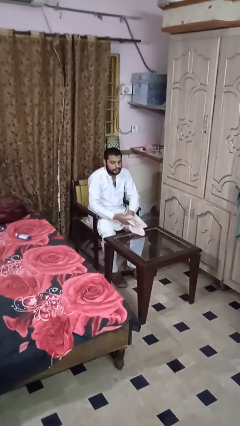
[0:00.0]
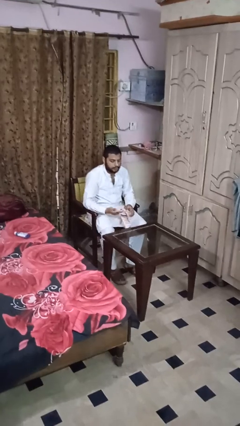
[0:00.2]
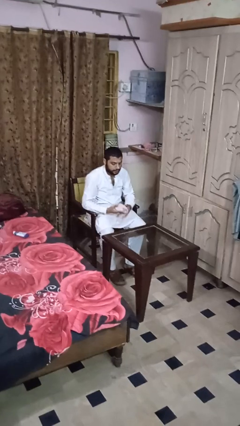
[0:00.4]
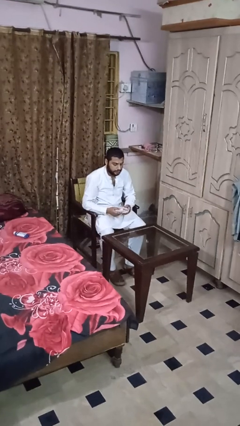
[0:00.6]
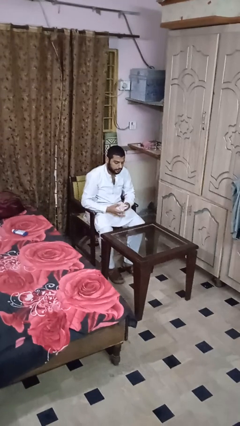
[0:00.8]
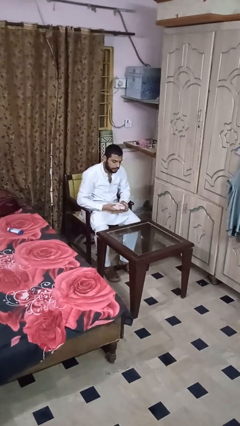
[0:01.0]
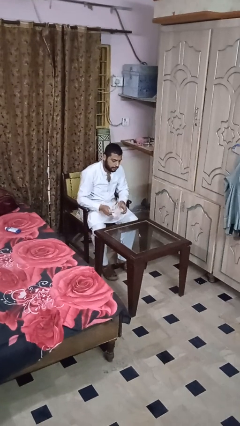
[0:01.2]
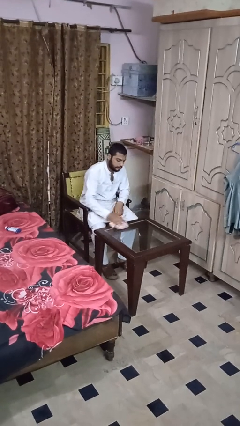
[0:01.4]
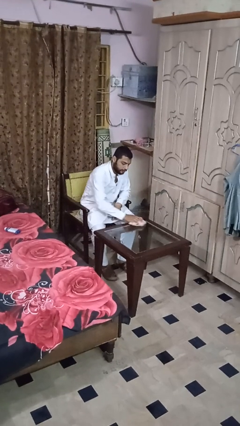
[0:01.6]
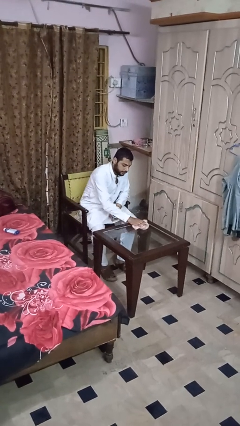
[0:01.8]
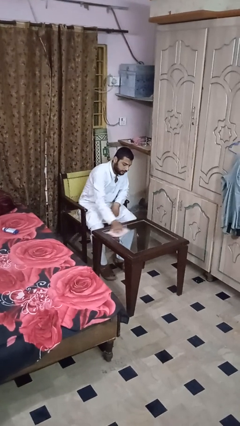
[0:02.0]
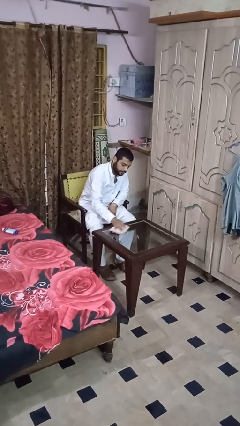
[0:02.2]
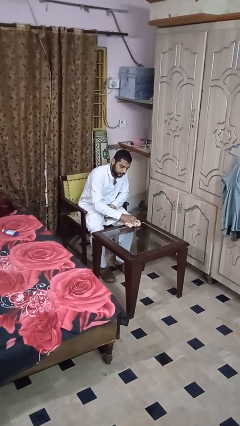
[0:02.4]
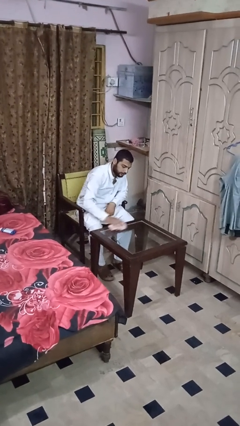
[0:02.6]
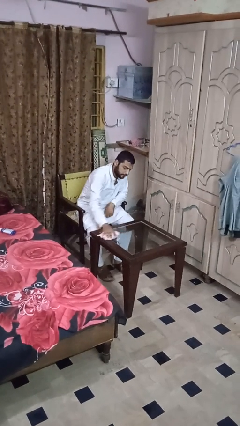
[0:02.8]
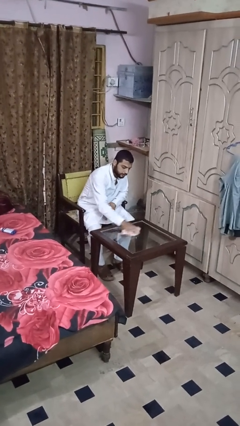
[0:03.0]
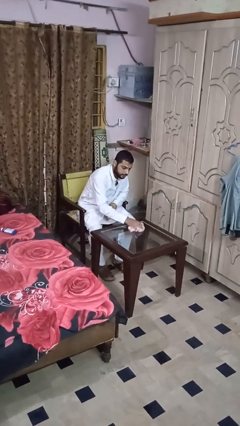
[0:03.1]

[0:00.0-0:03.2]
person cleans table with rag

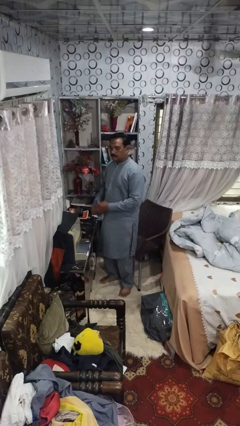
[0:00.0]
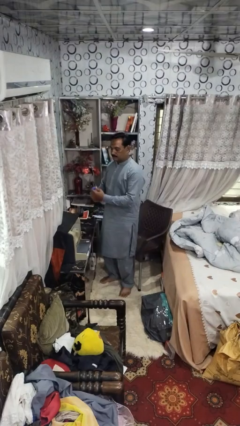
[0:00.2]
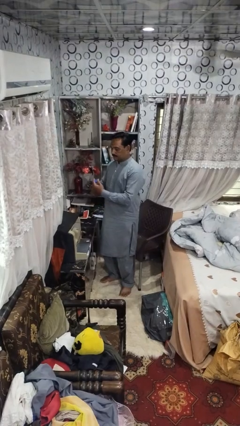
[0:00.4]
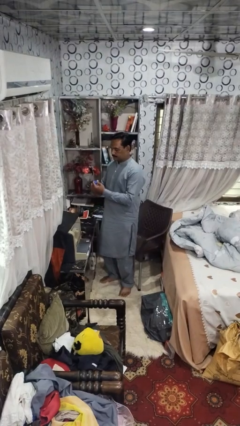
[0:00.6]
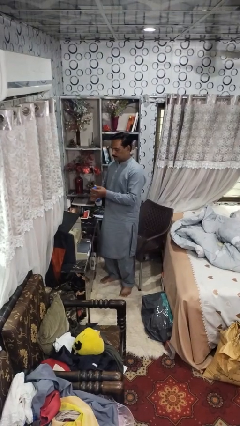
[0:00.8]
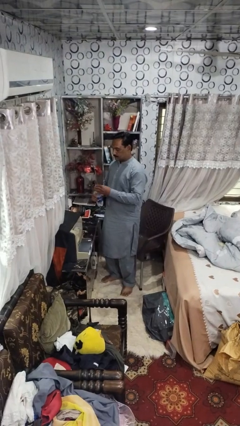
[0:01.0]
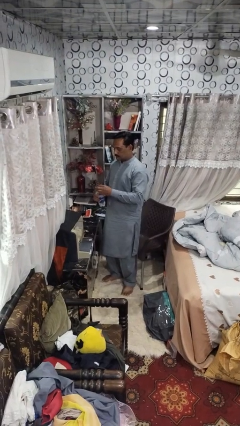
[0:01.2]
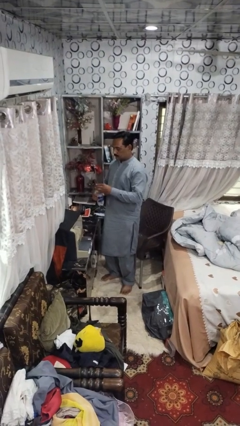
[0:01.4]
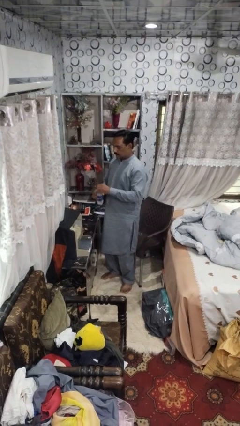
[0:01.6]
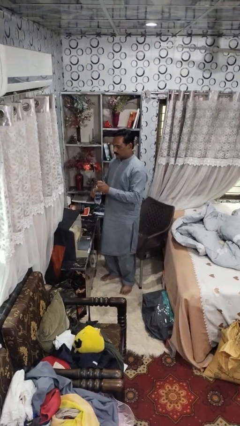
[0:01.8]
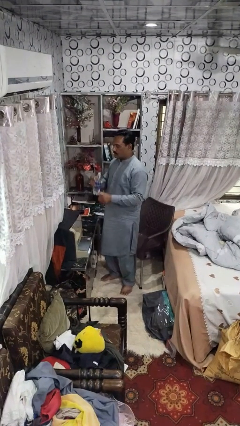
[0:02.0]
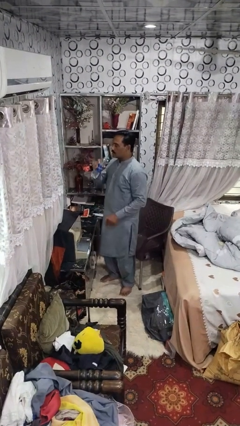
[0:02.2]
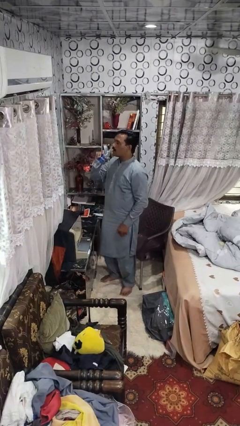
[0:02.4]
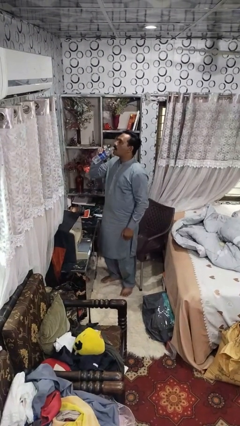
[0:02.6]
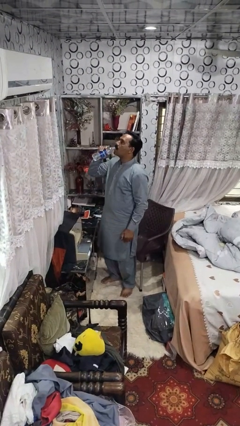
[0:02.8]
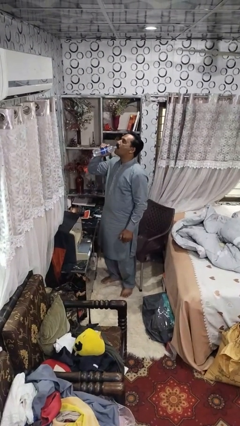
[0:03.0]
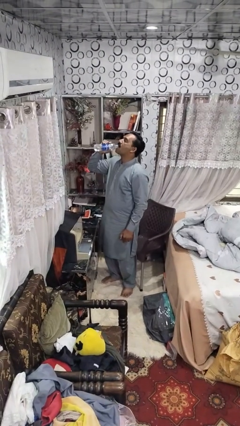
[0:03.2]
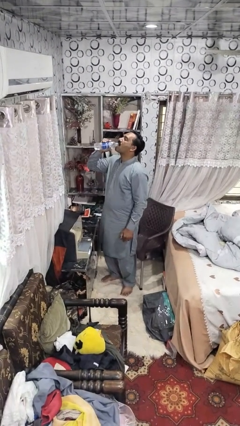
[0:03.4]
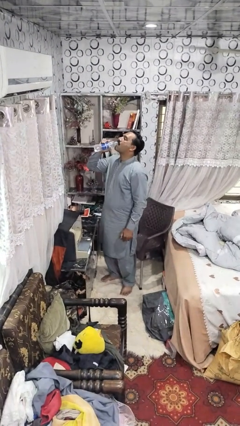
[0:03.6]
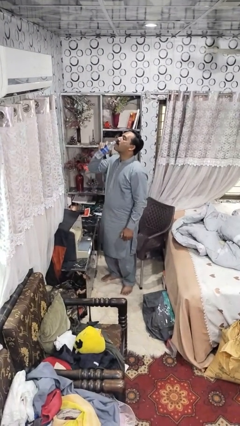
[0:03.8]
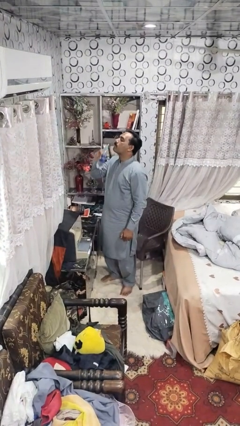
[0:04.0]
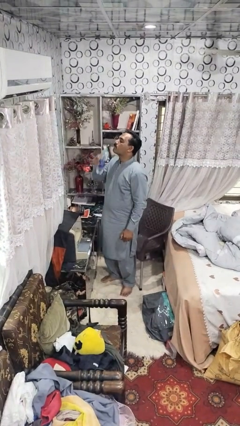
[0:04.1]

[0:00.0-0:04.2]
person drinks from bottle

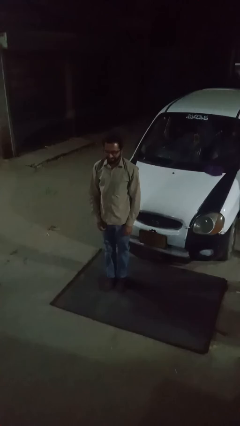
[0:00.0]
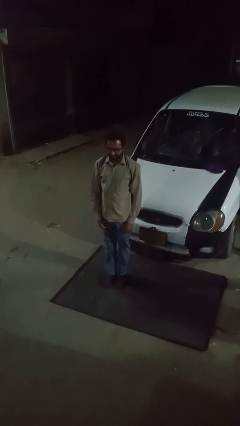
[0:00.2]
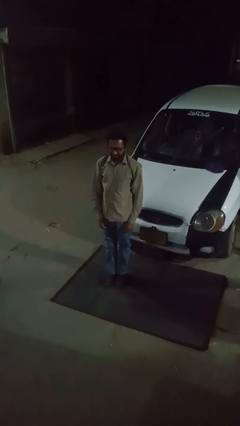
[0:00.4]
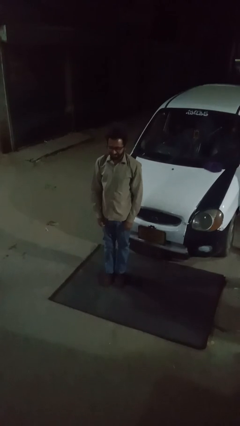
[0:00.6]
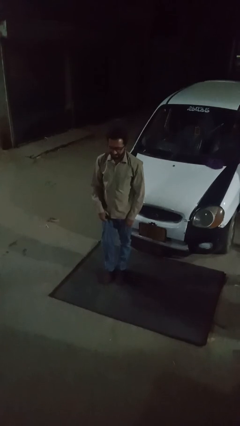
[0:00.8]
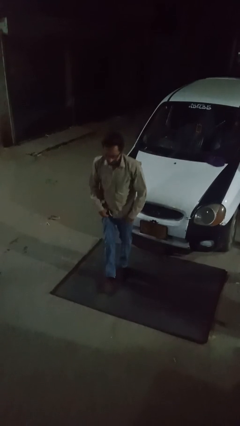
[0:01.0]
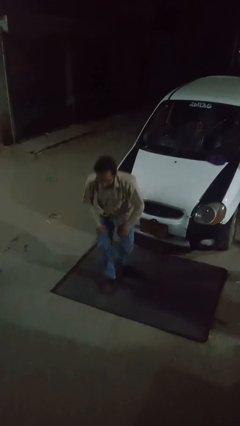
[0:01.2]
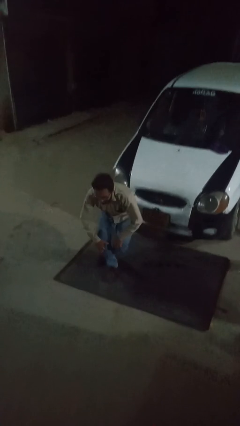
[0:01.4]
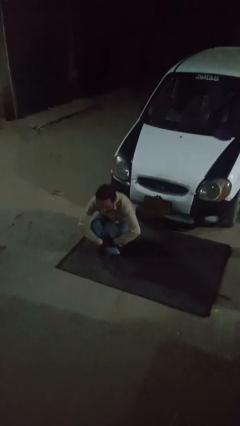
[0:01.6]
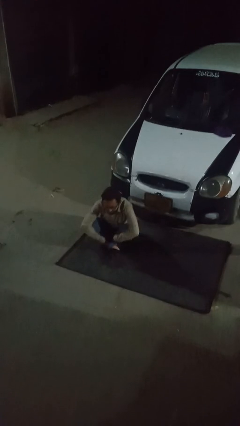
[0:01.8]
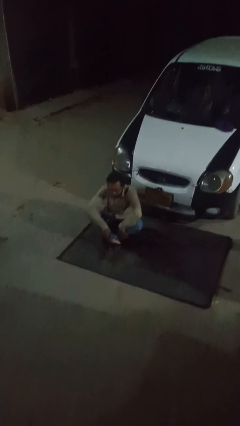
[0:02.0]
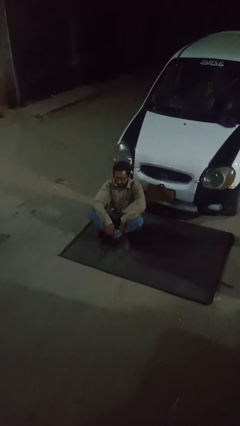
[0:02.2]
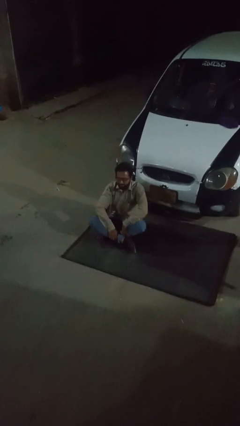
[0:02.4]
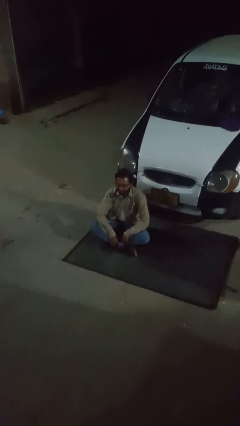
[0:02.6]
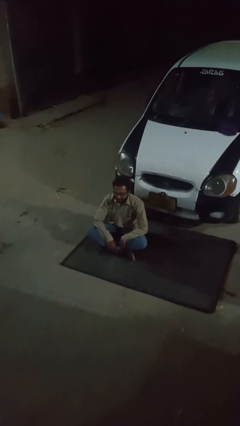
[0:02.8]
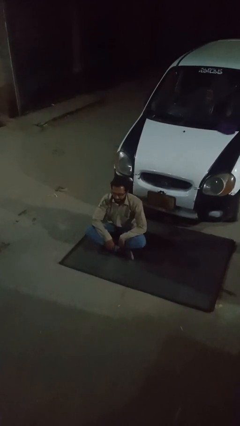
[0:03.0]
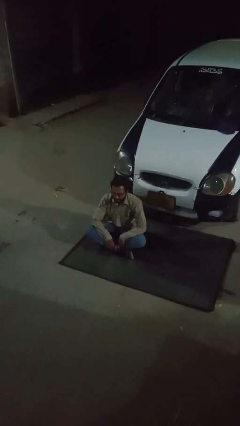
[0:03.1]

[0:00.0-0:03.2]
person sits crisscross

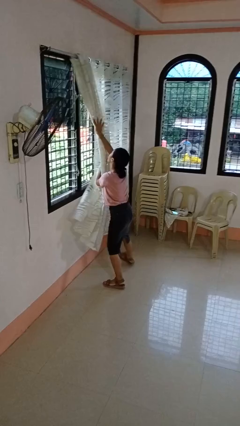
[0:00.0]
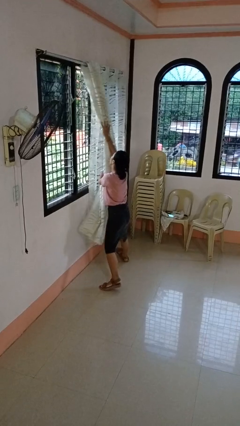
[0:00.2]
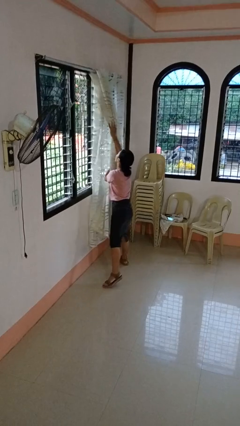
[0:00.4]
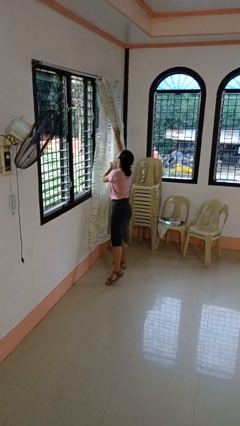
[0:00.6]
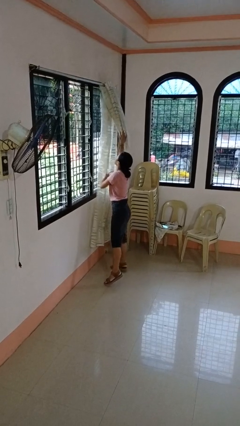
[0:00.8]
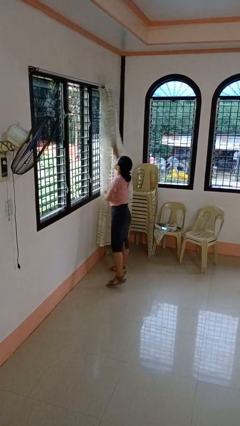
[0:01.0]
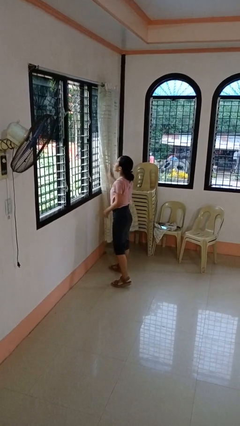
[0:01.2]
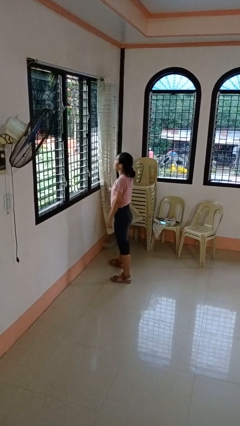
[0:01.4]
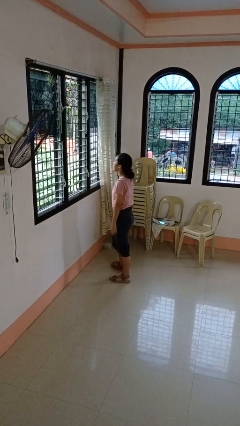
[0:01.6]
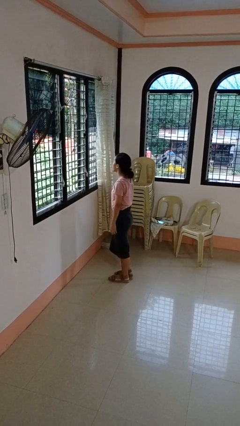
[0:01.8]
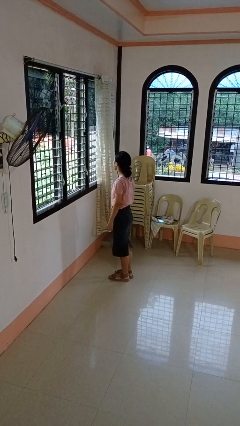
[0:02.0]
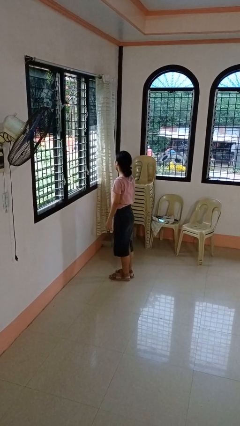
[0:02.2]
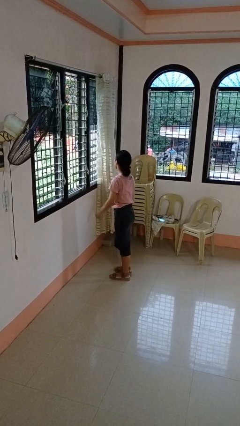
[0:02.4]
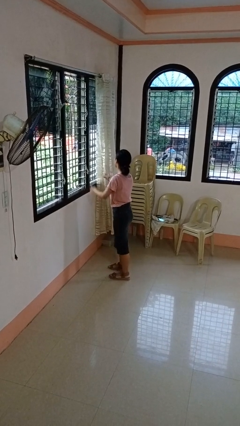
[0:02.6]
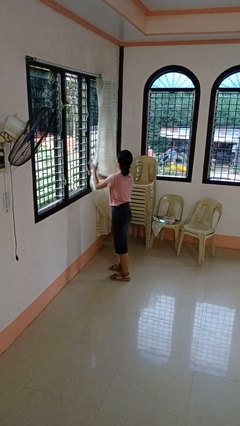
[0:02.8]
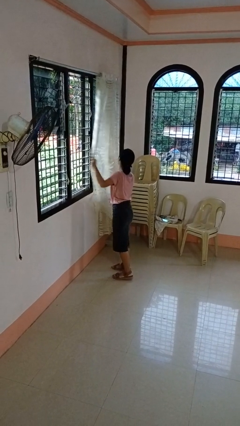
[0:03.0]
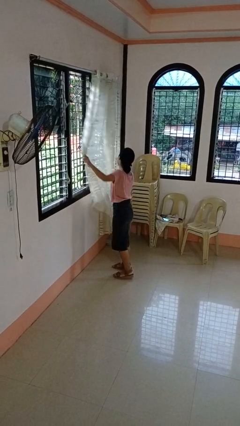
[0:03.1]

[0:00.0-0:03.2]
person opens curtains

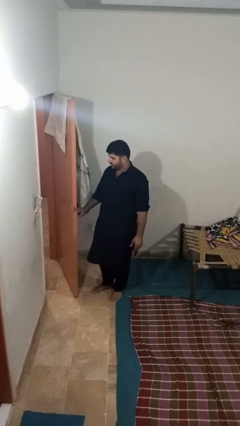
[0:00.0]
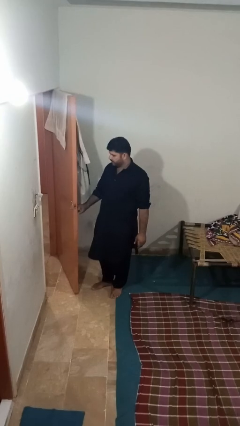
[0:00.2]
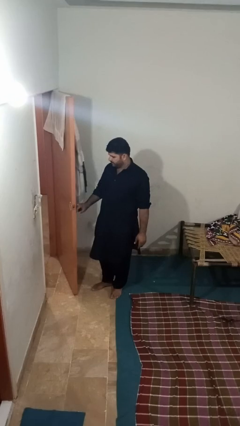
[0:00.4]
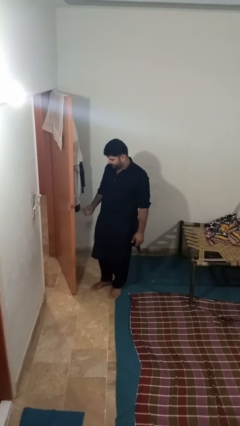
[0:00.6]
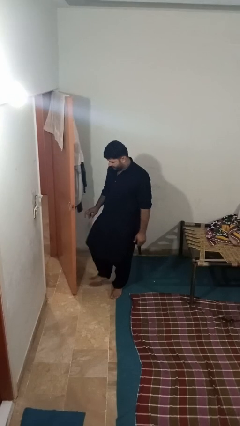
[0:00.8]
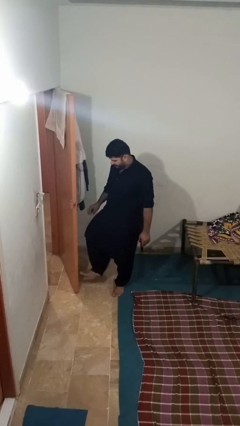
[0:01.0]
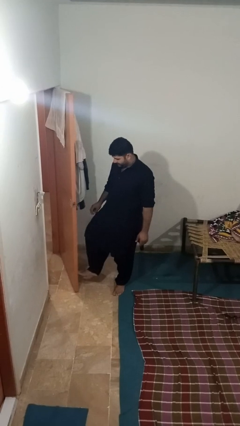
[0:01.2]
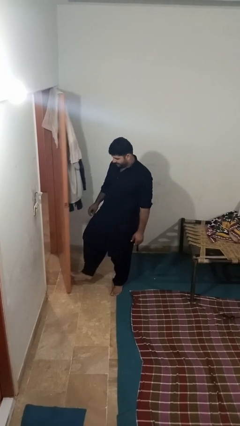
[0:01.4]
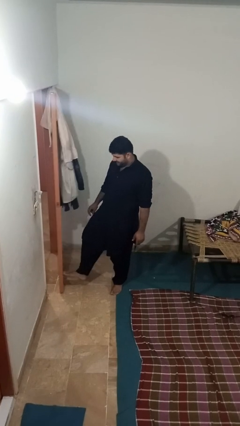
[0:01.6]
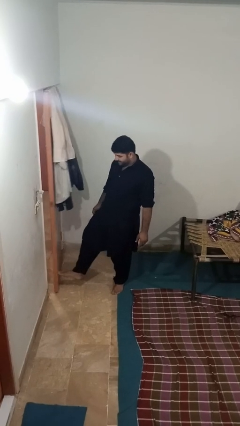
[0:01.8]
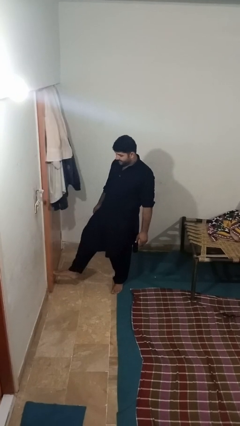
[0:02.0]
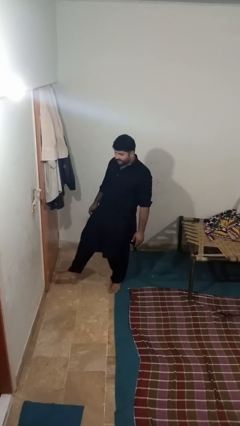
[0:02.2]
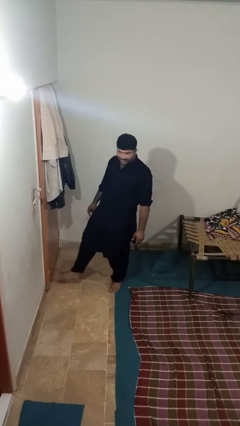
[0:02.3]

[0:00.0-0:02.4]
person closes door with foot

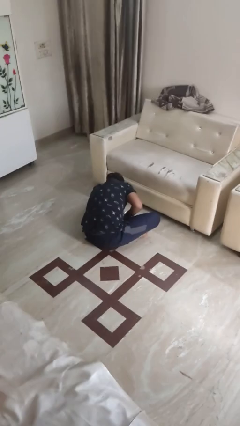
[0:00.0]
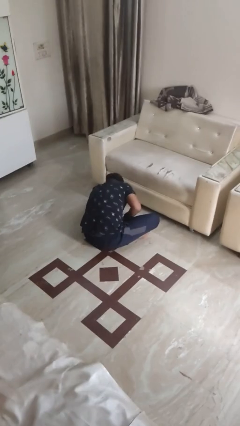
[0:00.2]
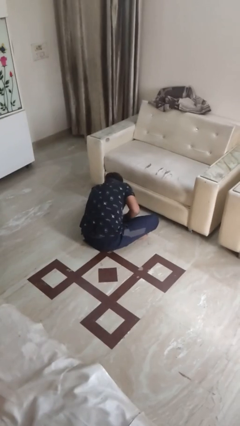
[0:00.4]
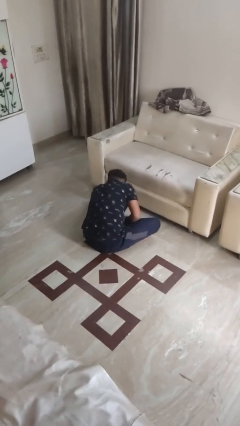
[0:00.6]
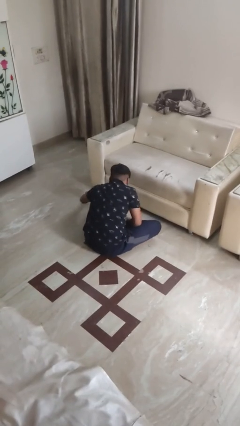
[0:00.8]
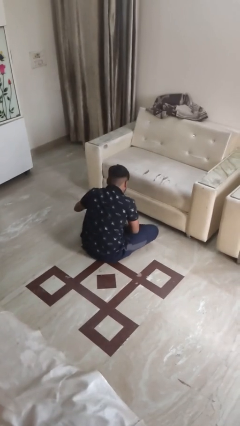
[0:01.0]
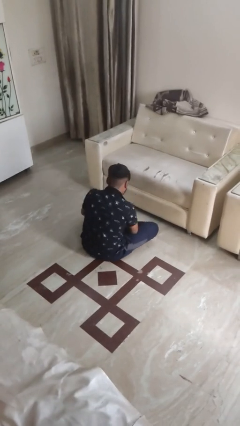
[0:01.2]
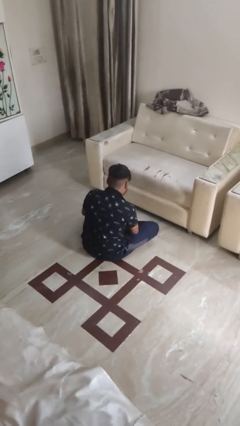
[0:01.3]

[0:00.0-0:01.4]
person searches under couch
